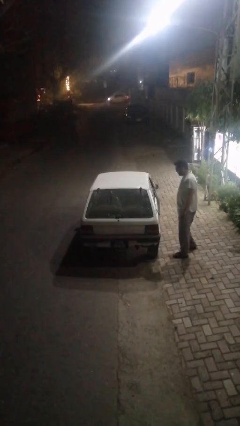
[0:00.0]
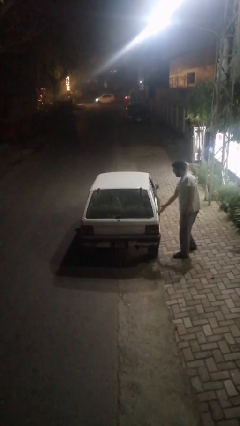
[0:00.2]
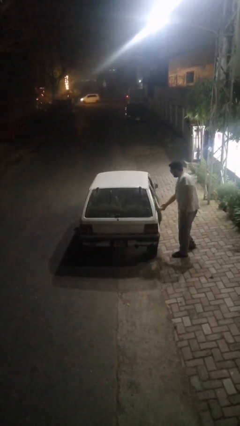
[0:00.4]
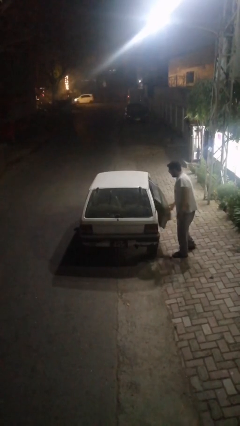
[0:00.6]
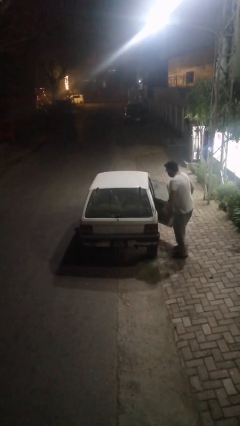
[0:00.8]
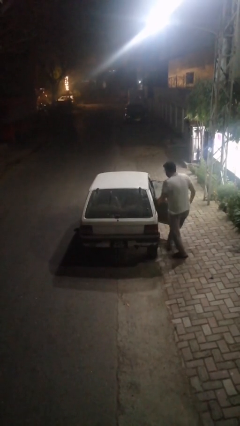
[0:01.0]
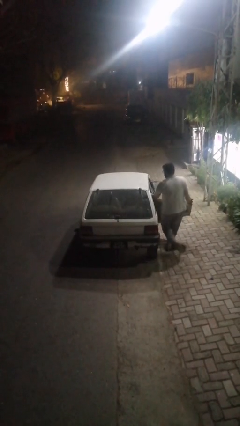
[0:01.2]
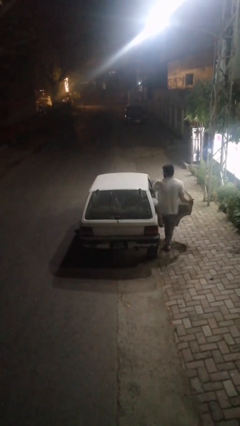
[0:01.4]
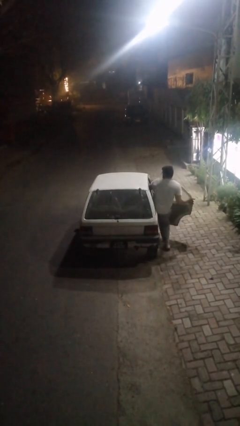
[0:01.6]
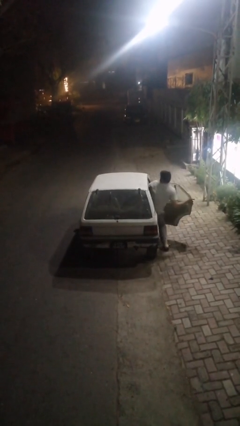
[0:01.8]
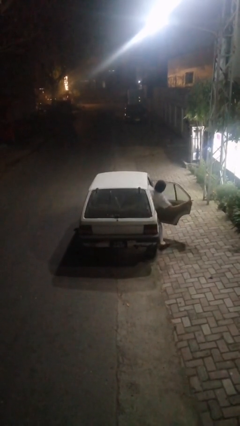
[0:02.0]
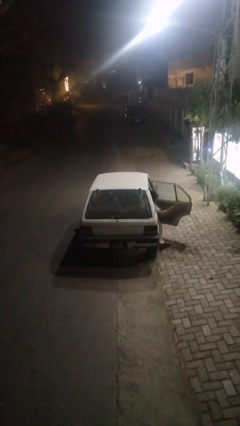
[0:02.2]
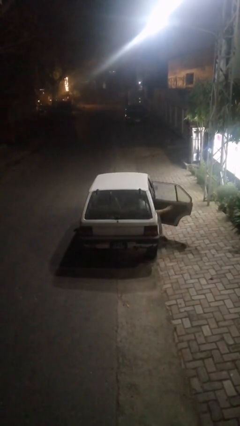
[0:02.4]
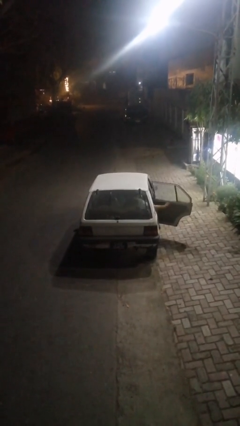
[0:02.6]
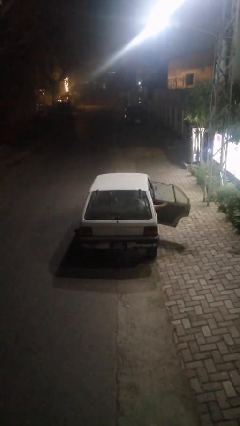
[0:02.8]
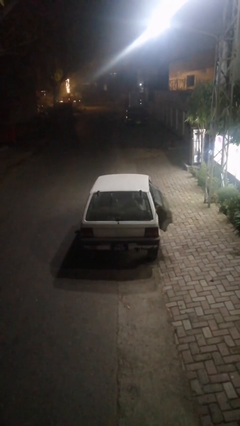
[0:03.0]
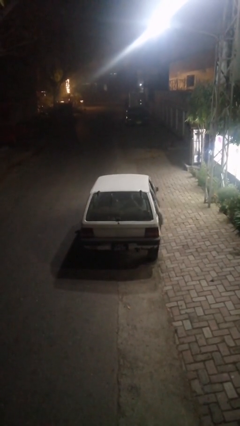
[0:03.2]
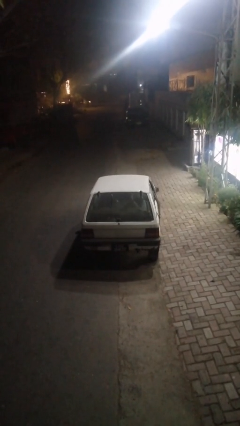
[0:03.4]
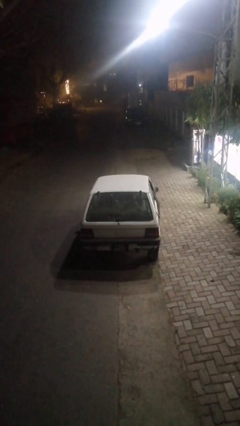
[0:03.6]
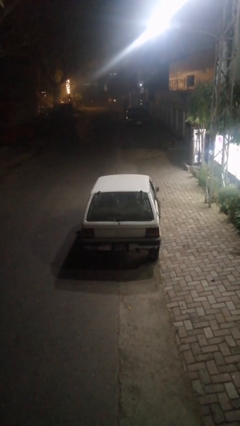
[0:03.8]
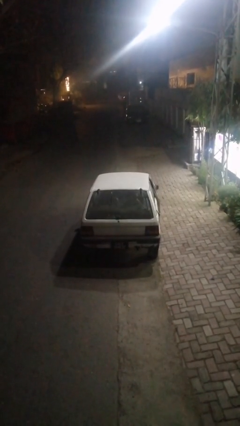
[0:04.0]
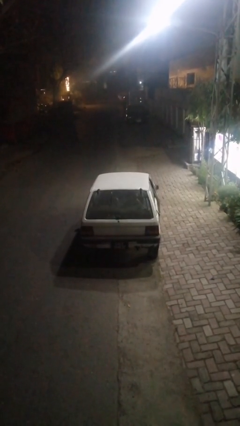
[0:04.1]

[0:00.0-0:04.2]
car picks up person

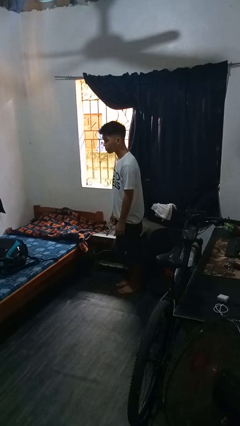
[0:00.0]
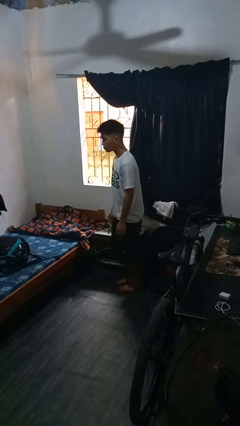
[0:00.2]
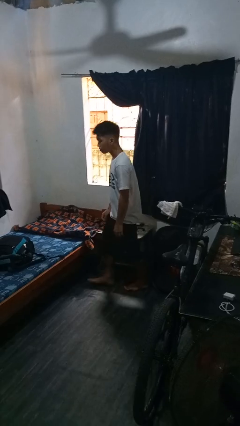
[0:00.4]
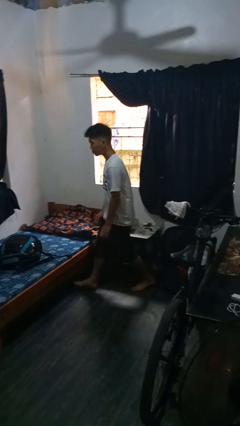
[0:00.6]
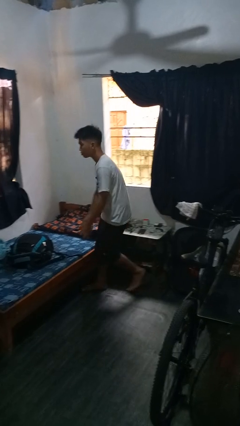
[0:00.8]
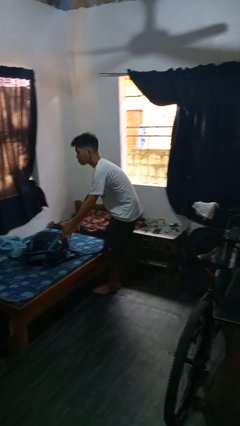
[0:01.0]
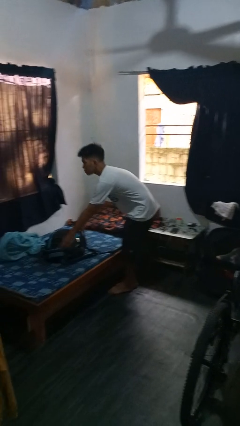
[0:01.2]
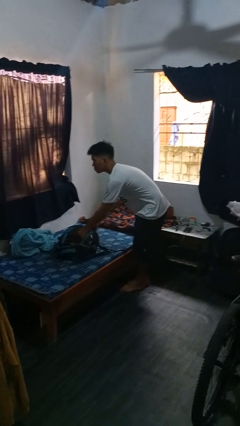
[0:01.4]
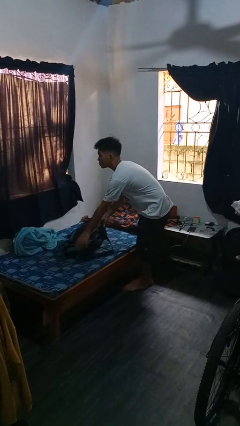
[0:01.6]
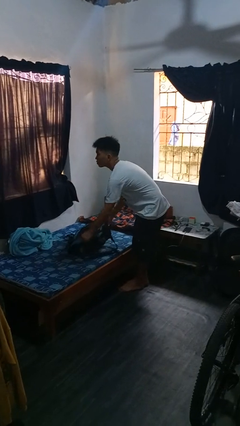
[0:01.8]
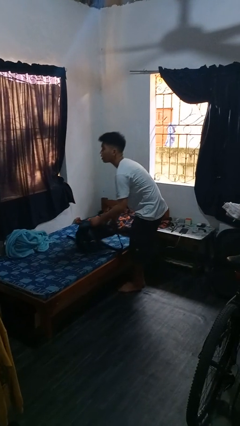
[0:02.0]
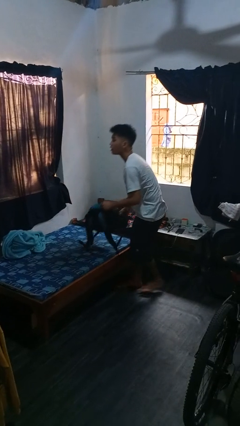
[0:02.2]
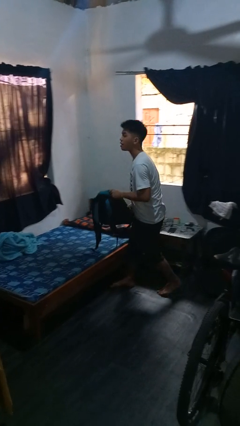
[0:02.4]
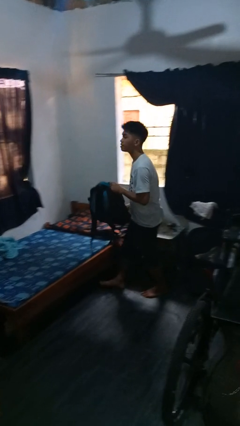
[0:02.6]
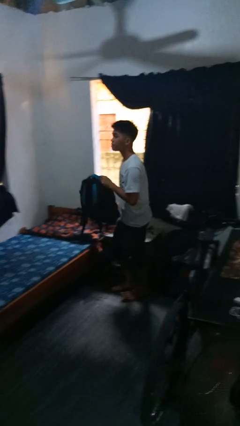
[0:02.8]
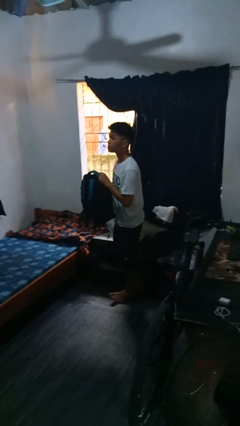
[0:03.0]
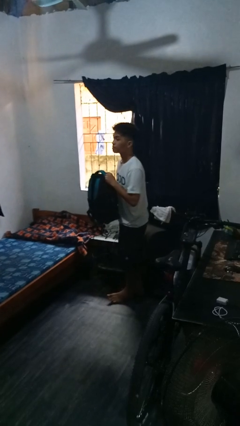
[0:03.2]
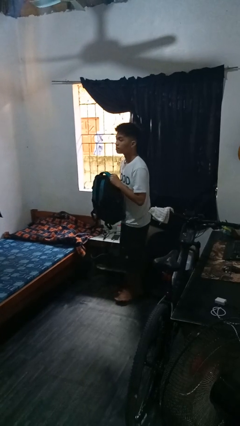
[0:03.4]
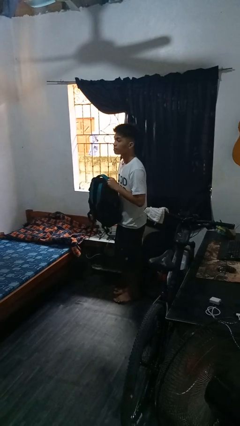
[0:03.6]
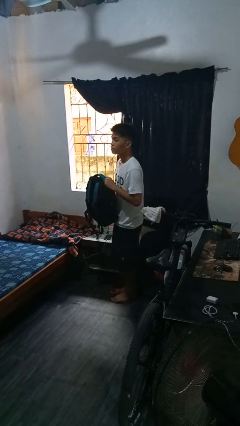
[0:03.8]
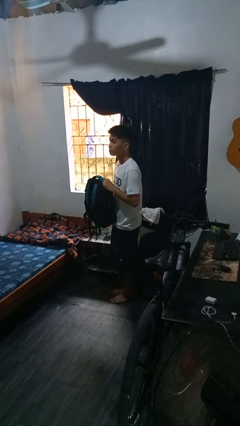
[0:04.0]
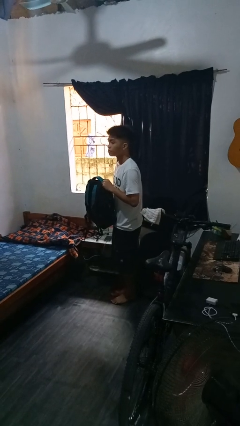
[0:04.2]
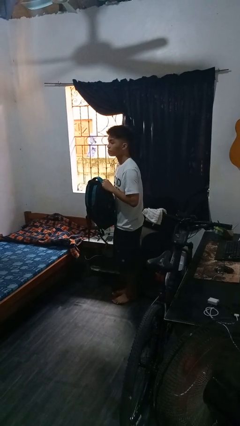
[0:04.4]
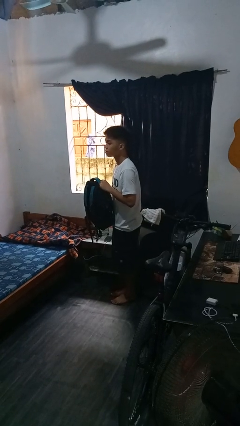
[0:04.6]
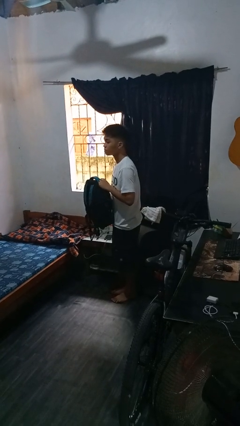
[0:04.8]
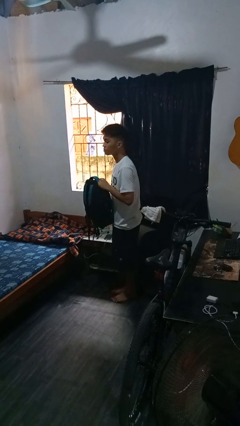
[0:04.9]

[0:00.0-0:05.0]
person picks up object from bed

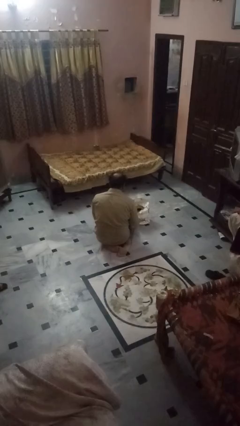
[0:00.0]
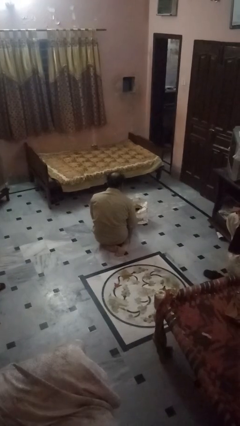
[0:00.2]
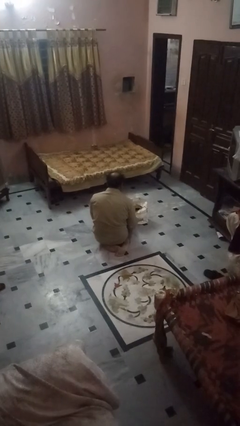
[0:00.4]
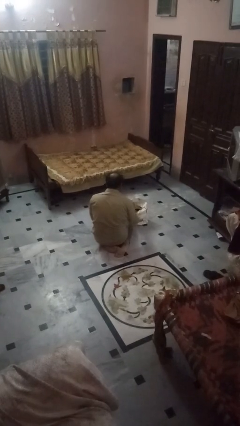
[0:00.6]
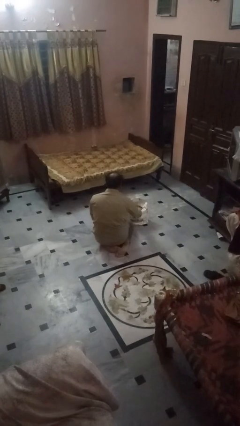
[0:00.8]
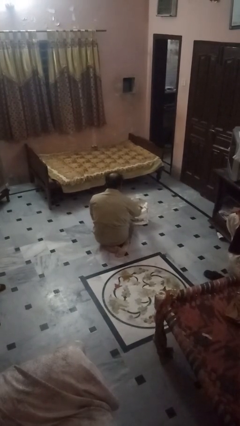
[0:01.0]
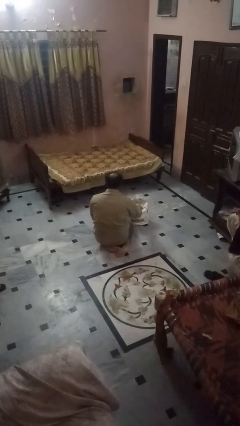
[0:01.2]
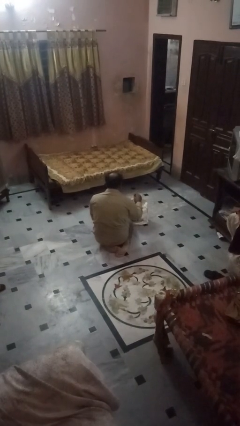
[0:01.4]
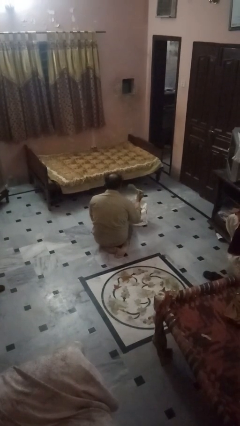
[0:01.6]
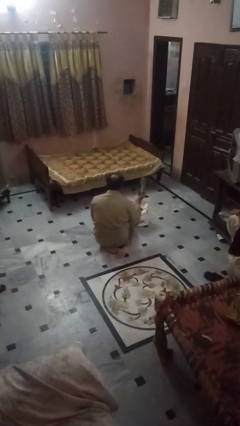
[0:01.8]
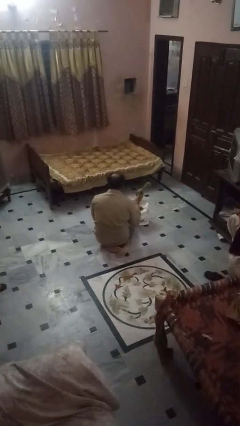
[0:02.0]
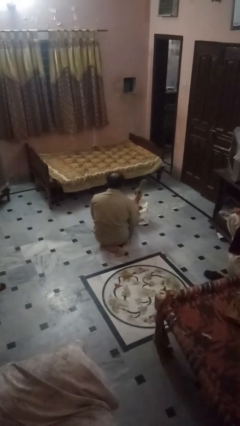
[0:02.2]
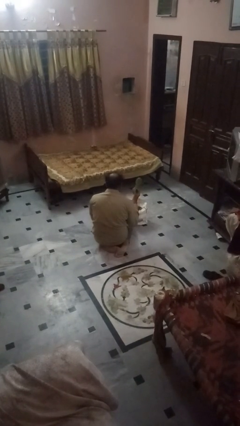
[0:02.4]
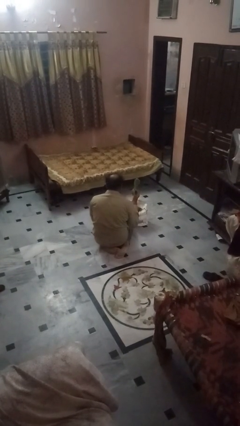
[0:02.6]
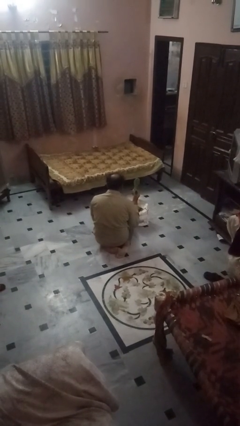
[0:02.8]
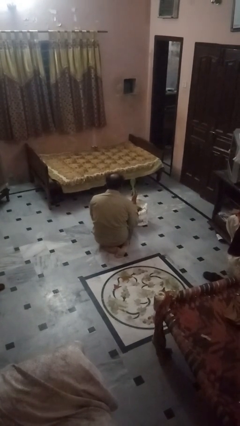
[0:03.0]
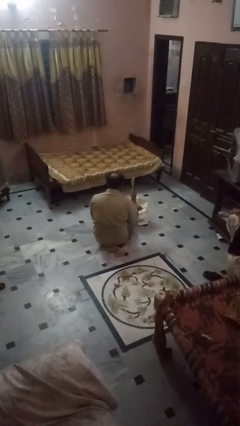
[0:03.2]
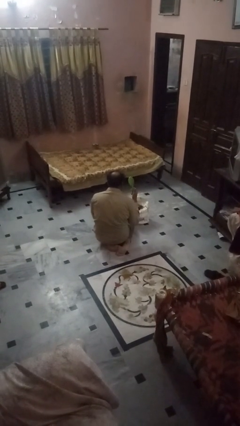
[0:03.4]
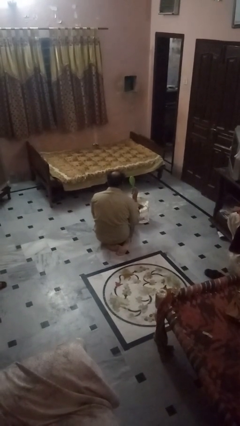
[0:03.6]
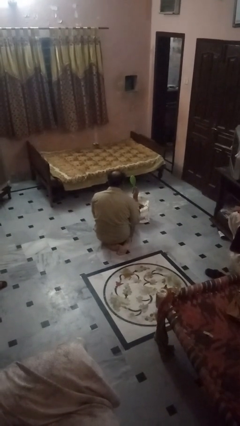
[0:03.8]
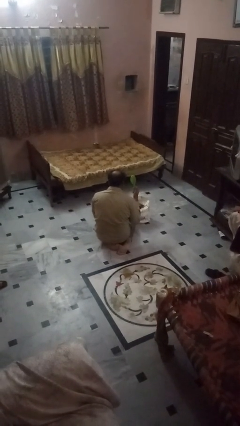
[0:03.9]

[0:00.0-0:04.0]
person takes object from bag

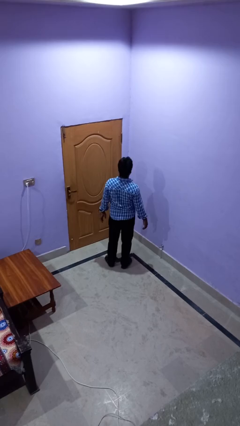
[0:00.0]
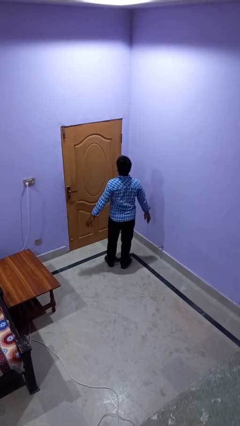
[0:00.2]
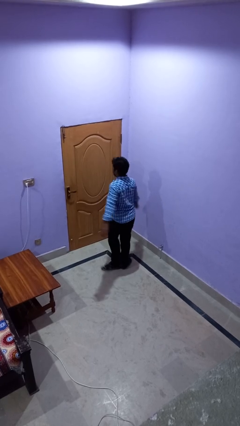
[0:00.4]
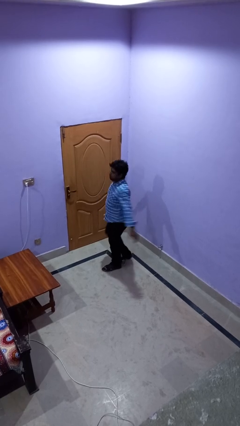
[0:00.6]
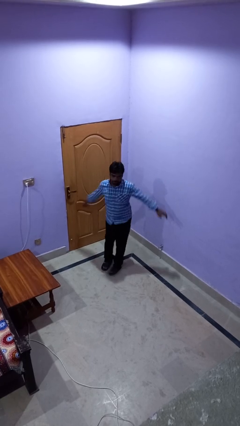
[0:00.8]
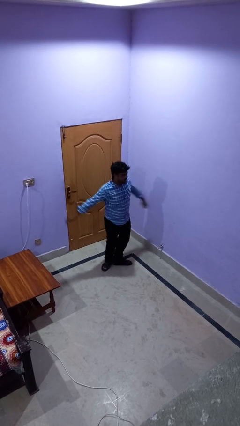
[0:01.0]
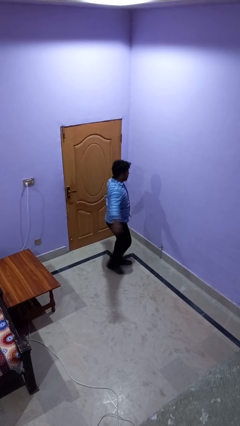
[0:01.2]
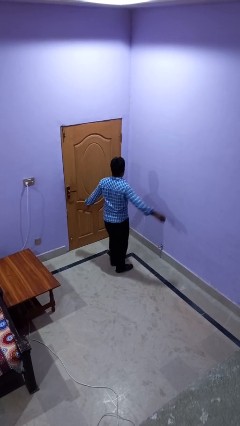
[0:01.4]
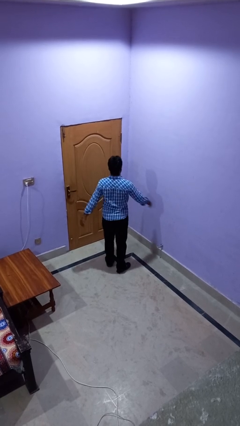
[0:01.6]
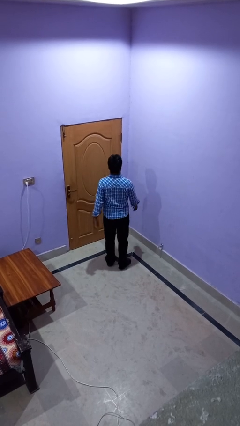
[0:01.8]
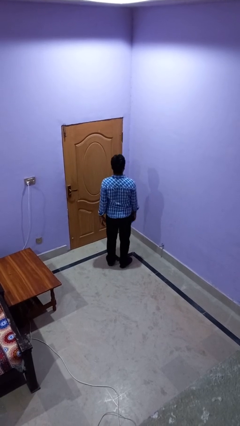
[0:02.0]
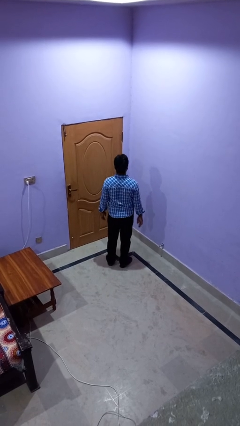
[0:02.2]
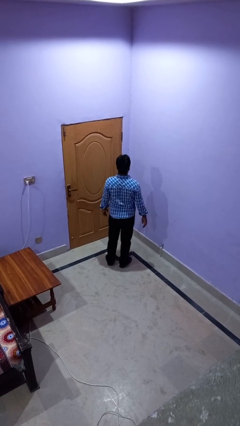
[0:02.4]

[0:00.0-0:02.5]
person twirls

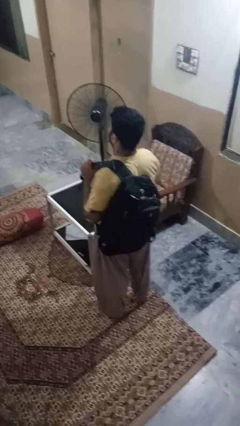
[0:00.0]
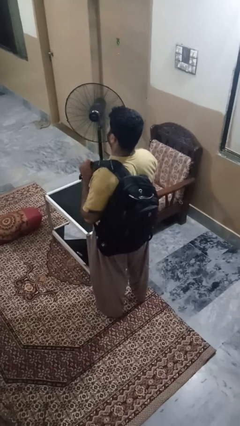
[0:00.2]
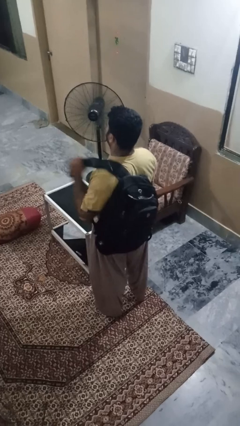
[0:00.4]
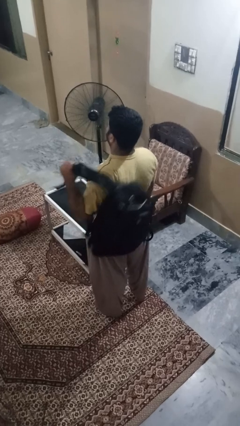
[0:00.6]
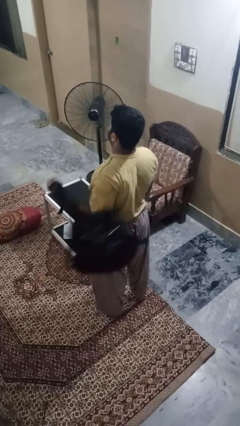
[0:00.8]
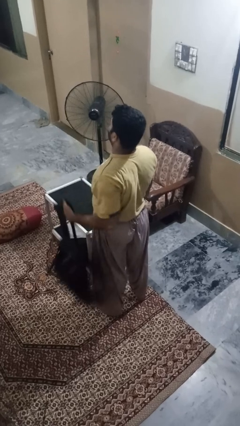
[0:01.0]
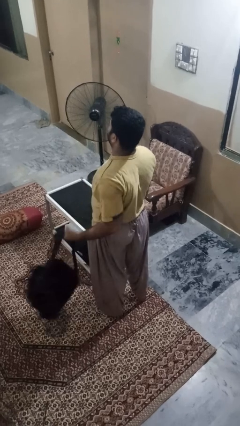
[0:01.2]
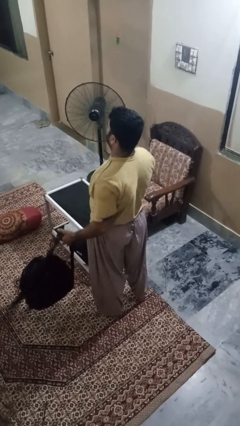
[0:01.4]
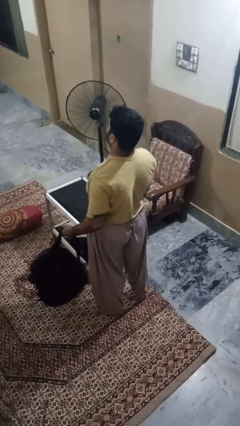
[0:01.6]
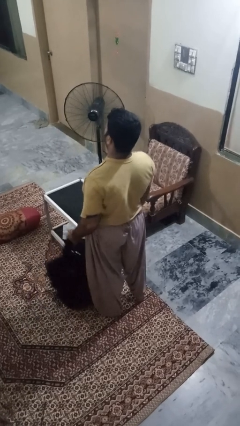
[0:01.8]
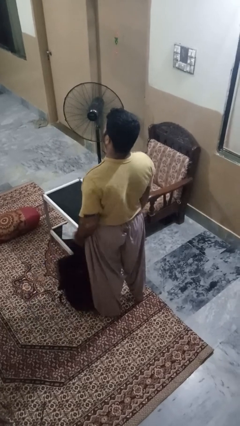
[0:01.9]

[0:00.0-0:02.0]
person takes off backpack
